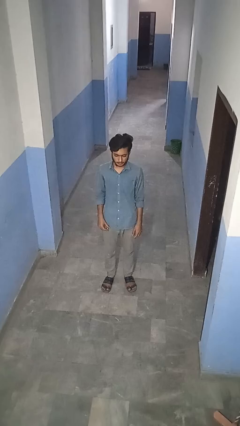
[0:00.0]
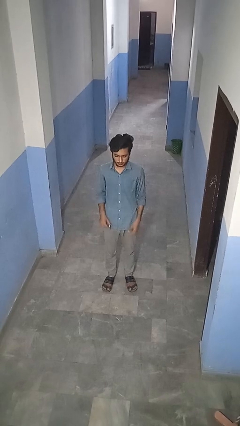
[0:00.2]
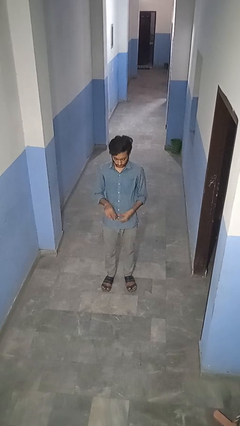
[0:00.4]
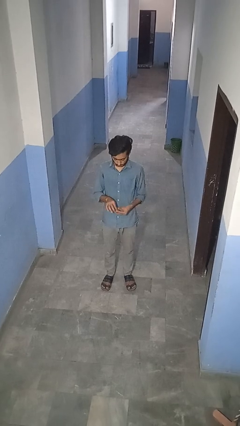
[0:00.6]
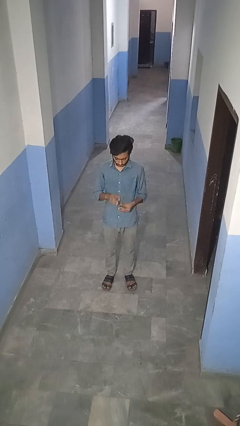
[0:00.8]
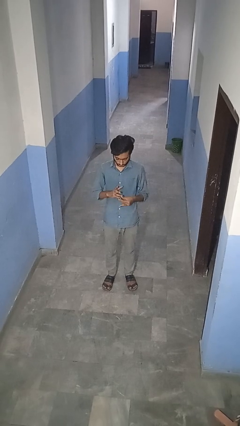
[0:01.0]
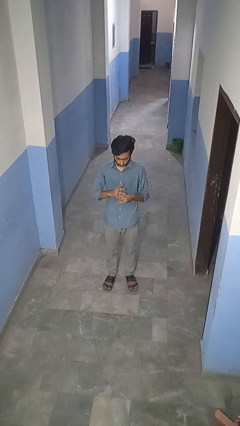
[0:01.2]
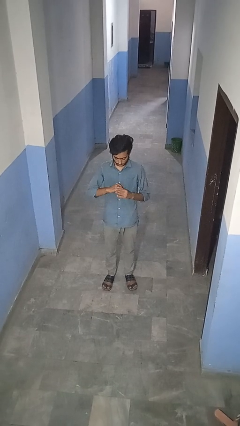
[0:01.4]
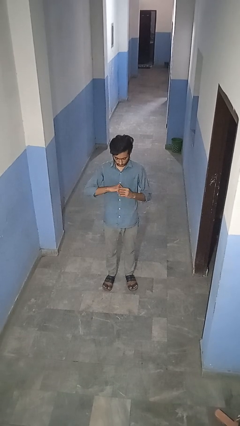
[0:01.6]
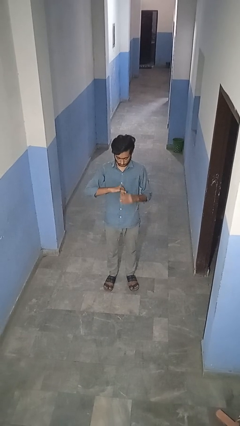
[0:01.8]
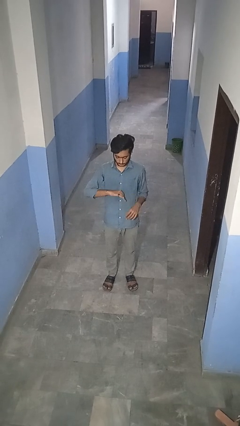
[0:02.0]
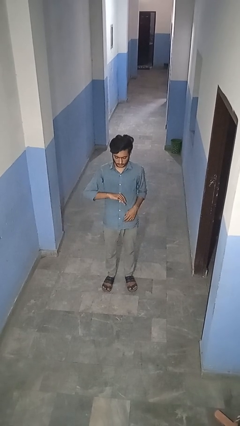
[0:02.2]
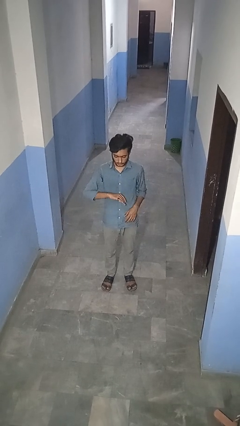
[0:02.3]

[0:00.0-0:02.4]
person puts on ring

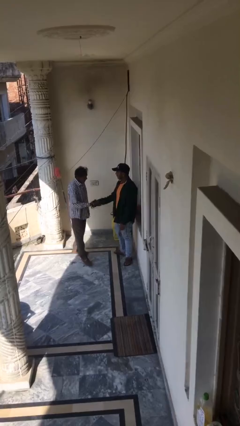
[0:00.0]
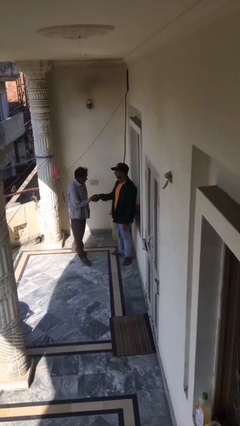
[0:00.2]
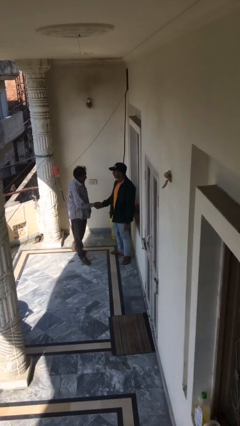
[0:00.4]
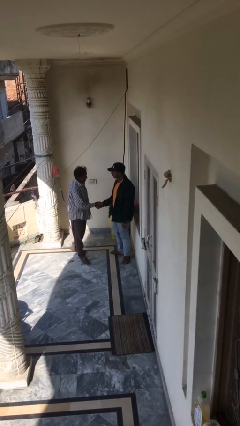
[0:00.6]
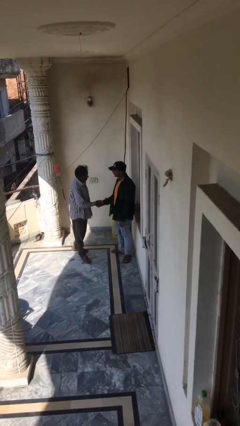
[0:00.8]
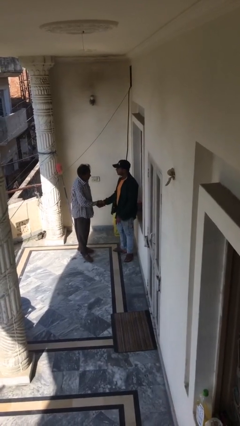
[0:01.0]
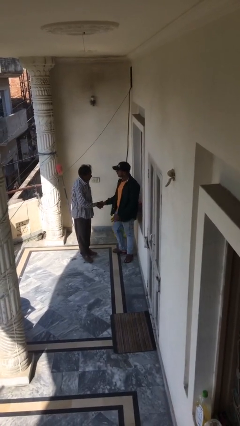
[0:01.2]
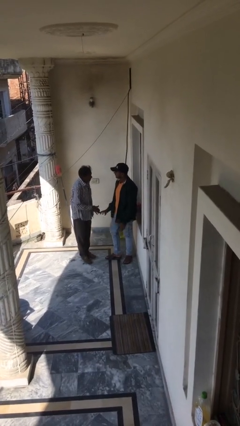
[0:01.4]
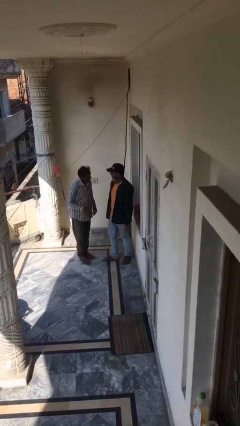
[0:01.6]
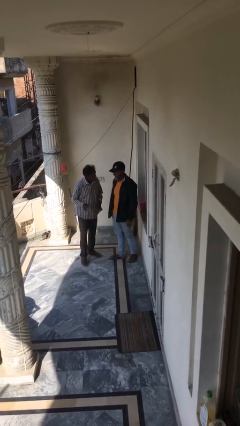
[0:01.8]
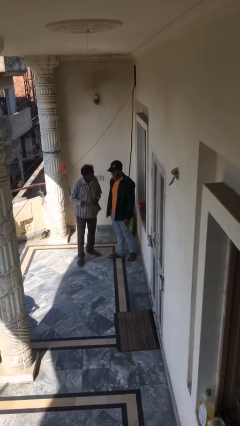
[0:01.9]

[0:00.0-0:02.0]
person shakes hand

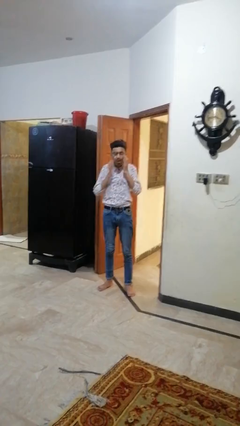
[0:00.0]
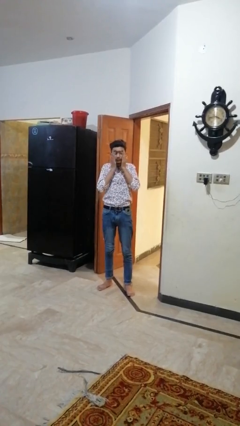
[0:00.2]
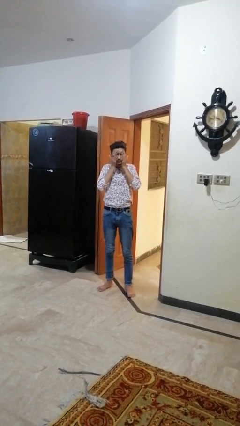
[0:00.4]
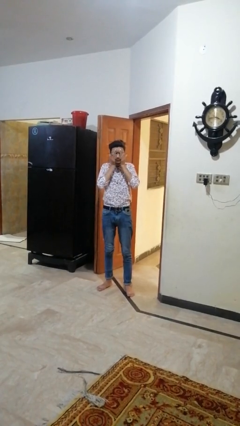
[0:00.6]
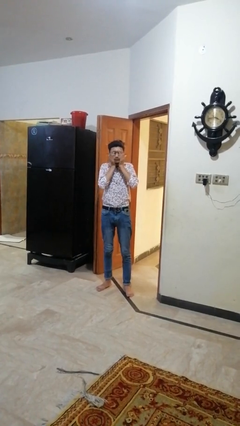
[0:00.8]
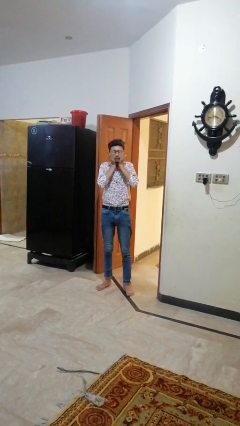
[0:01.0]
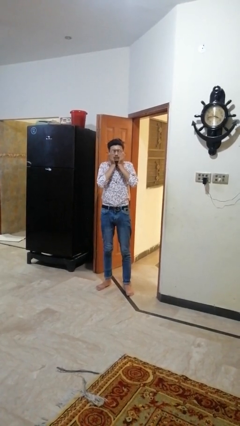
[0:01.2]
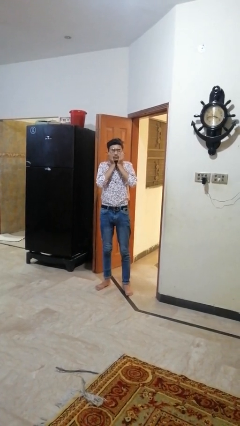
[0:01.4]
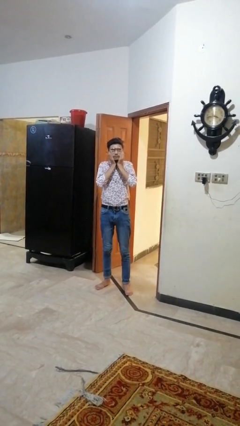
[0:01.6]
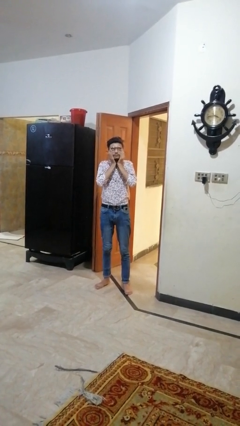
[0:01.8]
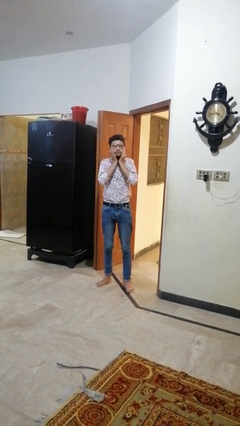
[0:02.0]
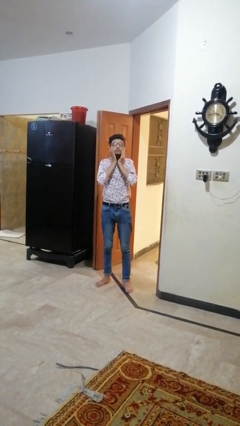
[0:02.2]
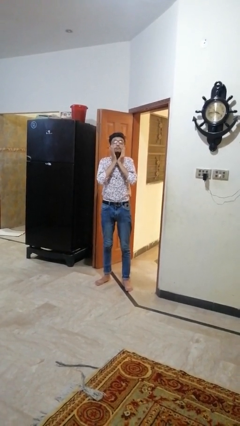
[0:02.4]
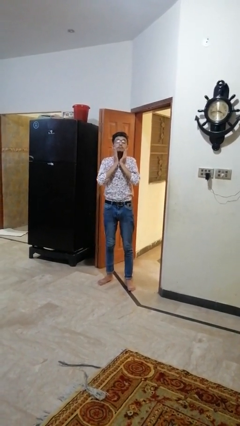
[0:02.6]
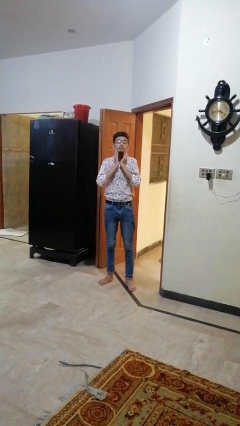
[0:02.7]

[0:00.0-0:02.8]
person rubs eyes

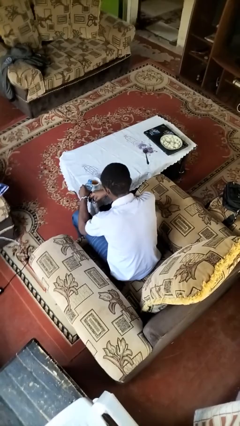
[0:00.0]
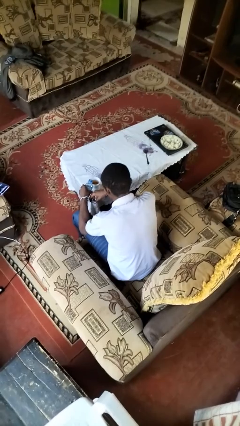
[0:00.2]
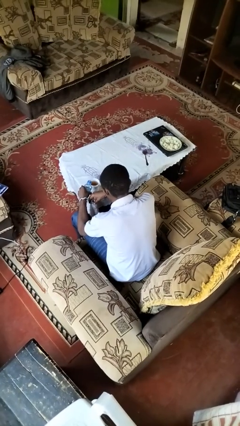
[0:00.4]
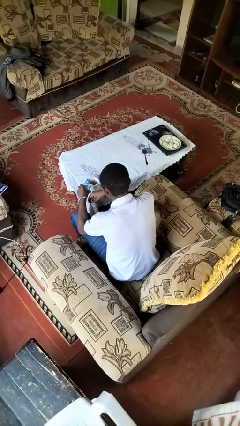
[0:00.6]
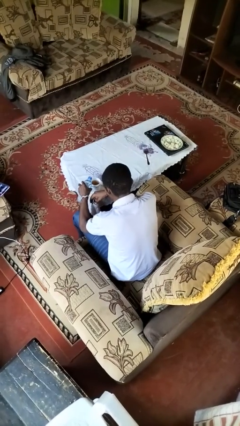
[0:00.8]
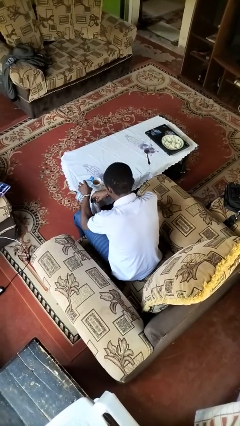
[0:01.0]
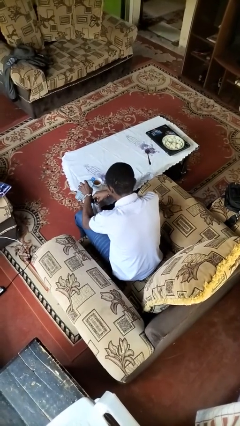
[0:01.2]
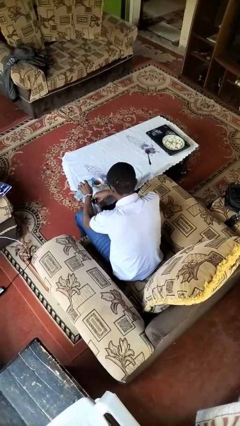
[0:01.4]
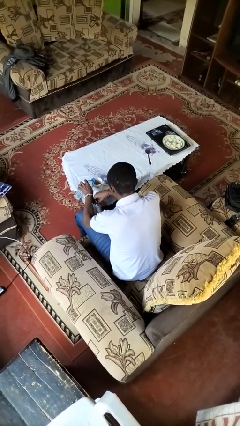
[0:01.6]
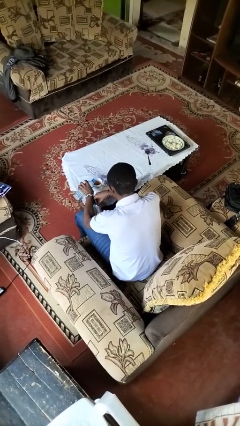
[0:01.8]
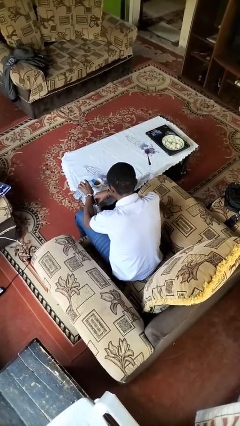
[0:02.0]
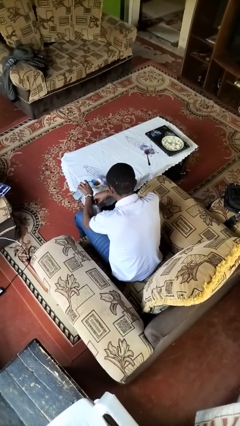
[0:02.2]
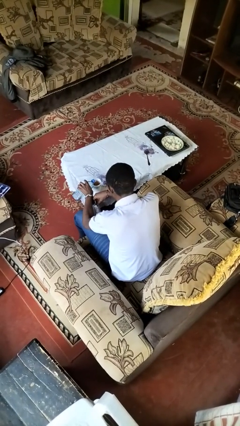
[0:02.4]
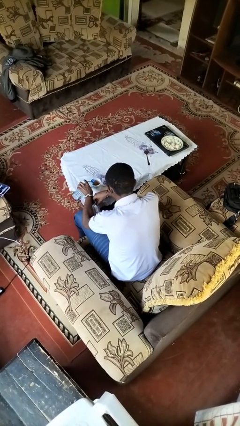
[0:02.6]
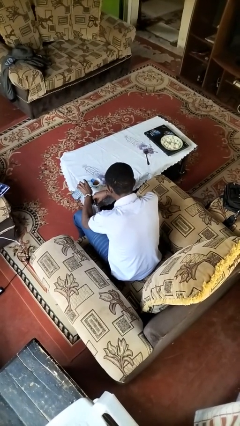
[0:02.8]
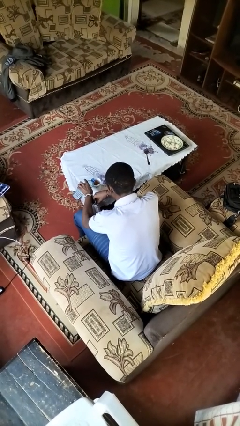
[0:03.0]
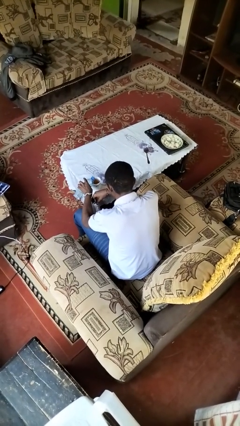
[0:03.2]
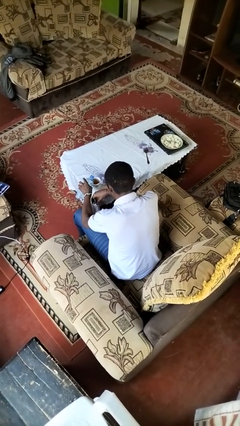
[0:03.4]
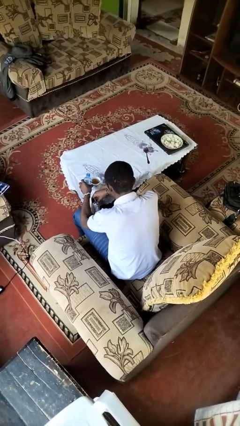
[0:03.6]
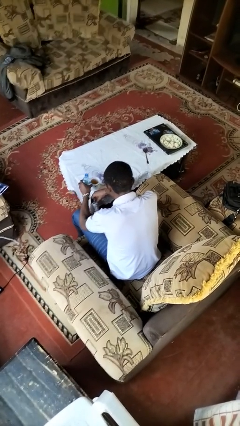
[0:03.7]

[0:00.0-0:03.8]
person pours liquid into cup

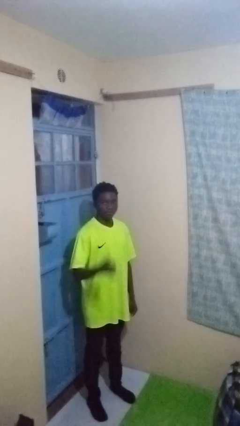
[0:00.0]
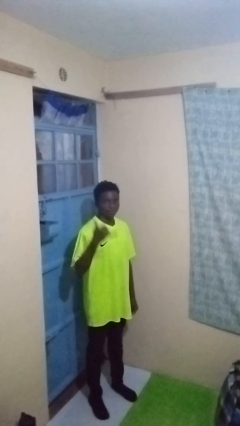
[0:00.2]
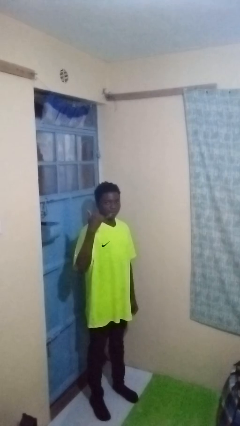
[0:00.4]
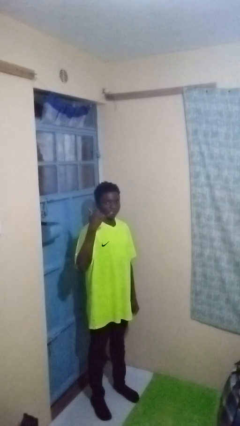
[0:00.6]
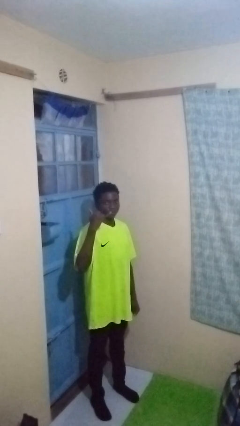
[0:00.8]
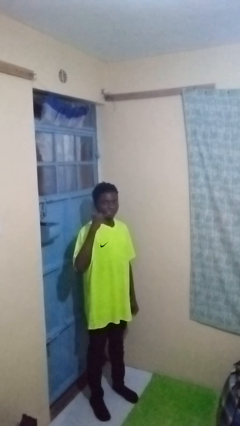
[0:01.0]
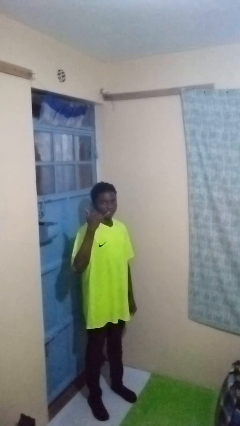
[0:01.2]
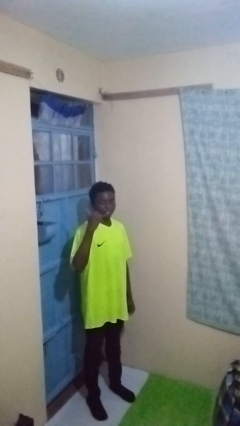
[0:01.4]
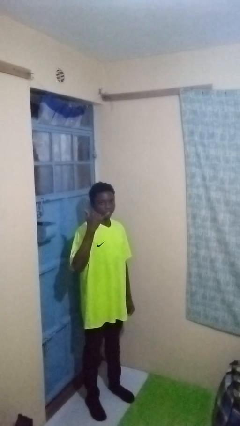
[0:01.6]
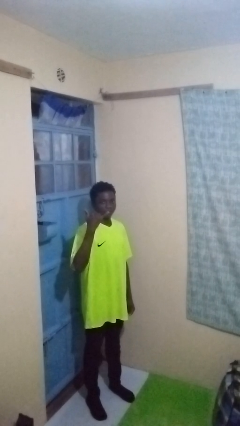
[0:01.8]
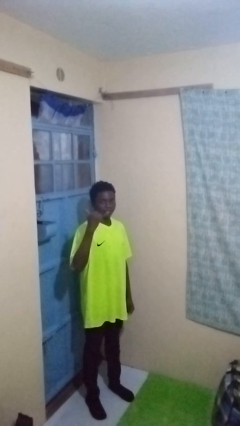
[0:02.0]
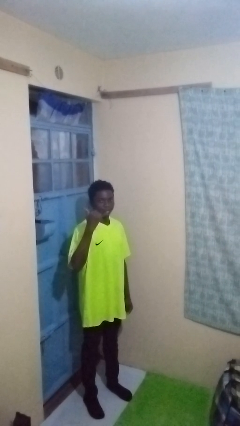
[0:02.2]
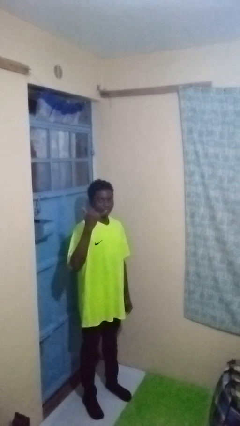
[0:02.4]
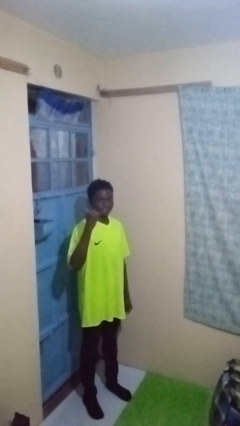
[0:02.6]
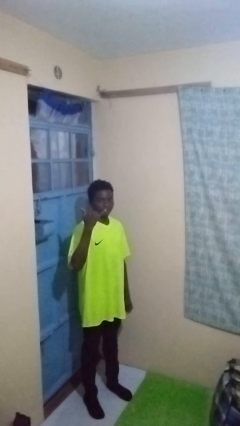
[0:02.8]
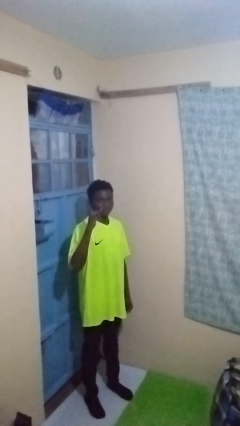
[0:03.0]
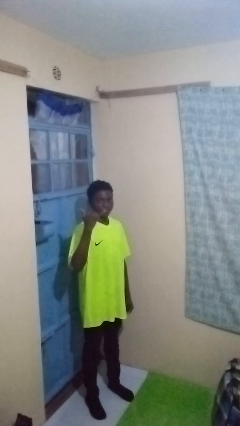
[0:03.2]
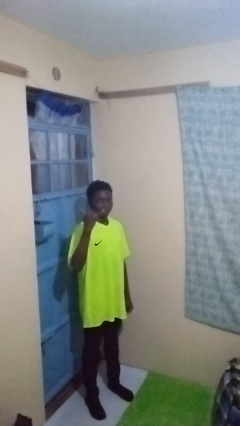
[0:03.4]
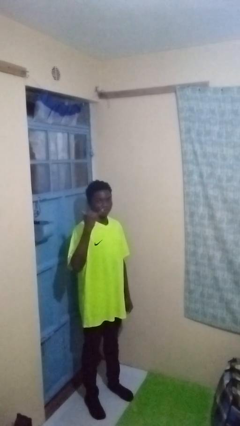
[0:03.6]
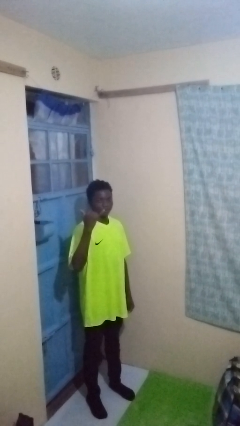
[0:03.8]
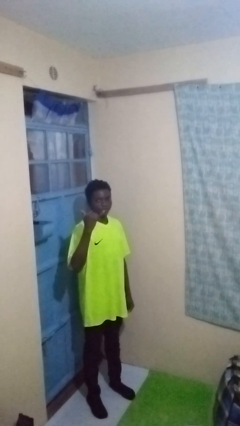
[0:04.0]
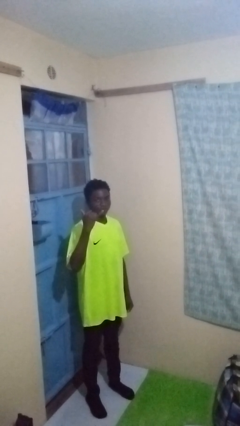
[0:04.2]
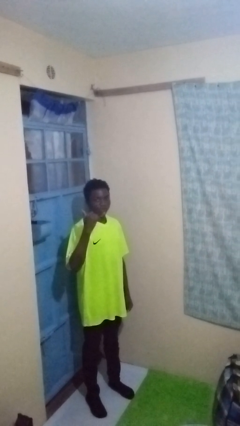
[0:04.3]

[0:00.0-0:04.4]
person gestures hang loose

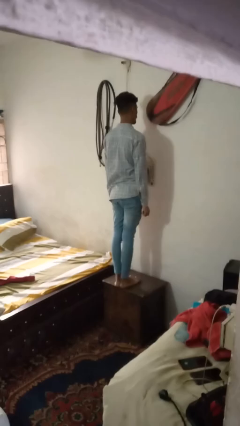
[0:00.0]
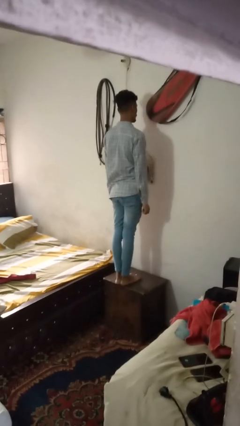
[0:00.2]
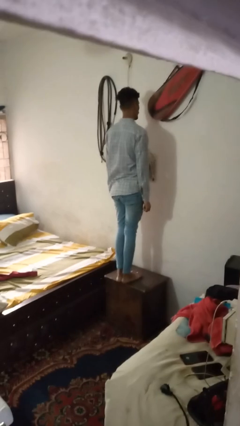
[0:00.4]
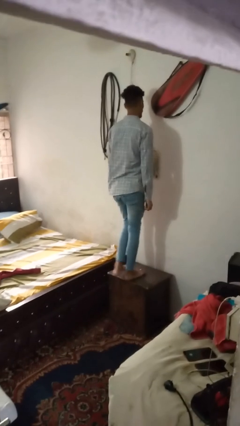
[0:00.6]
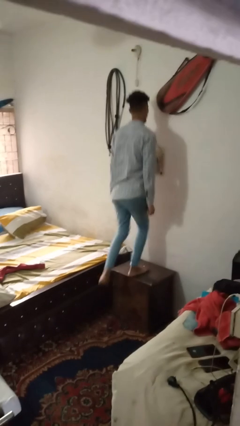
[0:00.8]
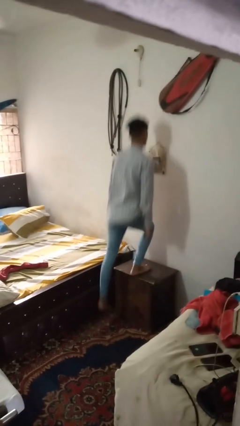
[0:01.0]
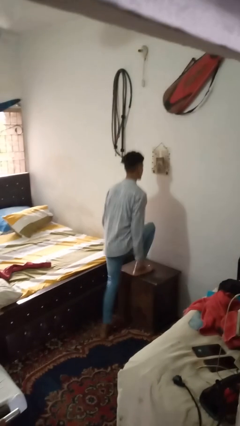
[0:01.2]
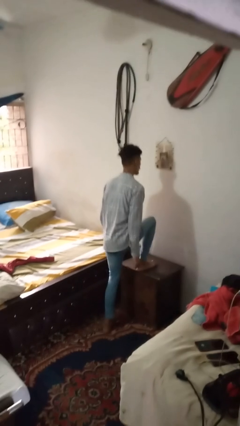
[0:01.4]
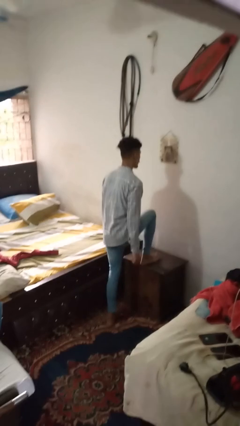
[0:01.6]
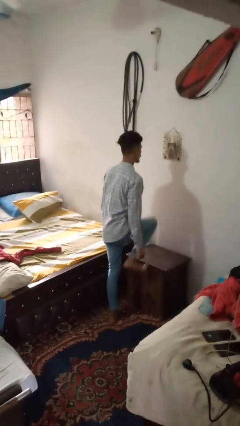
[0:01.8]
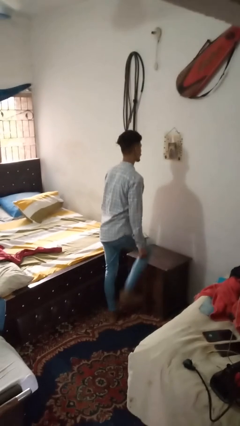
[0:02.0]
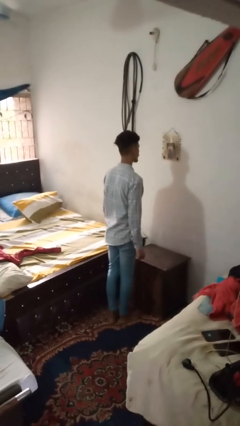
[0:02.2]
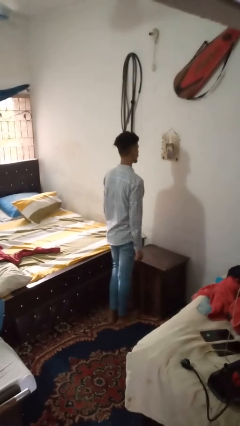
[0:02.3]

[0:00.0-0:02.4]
person climbs off table
